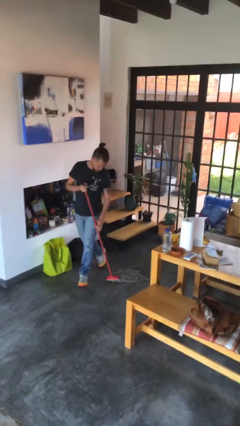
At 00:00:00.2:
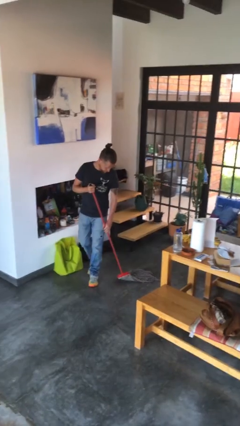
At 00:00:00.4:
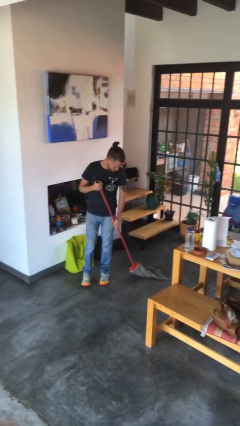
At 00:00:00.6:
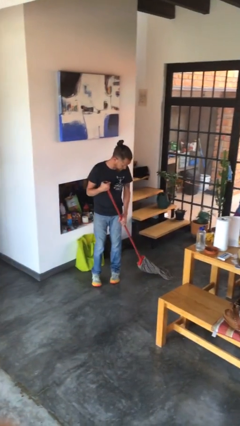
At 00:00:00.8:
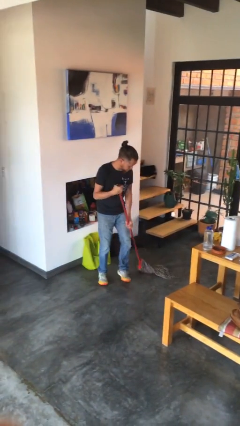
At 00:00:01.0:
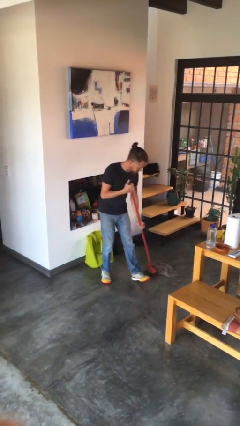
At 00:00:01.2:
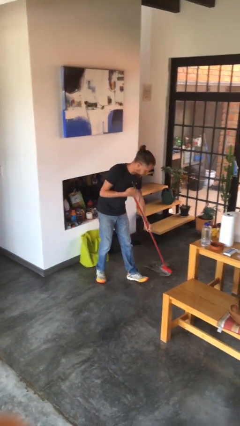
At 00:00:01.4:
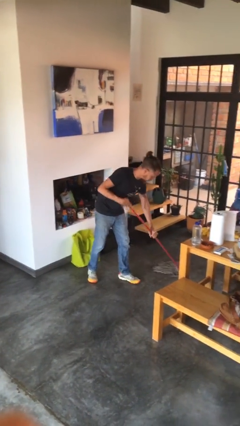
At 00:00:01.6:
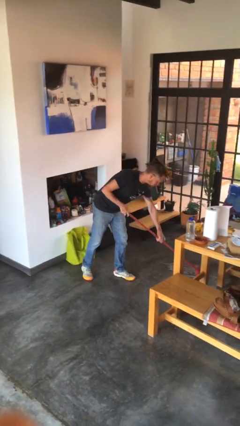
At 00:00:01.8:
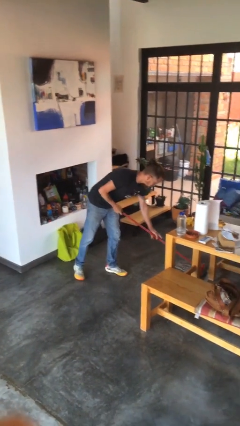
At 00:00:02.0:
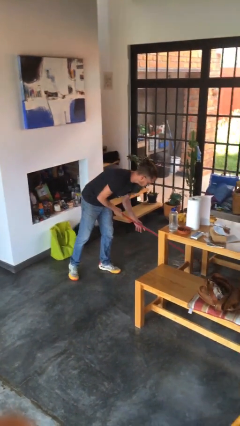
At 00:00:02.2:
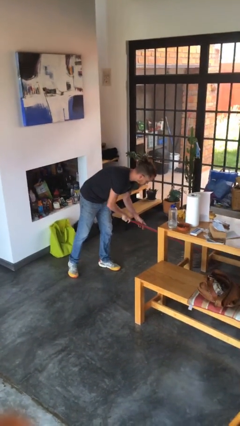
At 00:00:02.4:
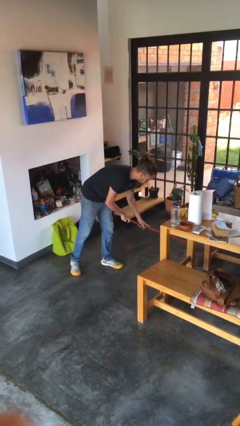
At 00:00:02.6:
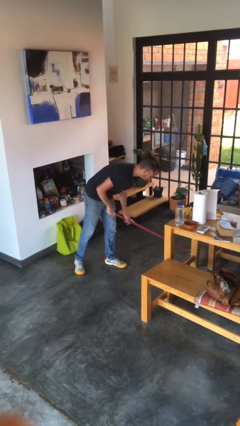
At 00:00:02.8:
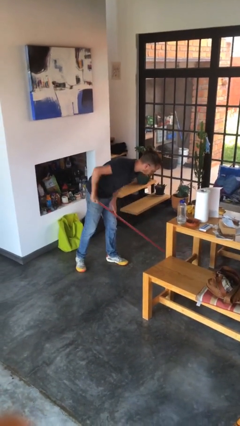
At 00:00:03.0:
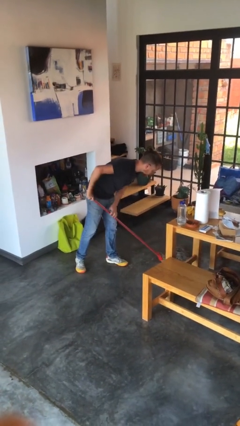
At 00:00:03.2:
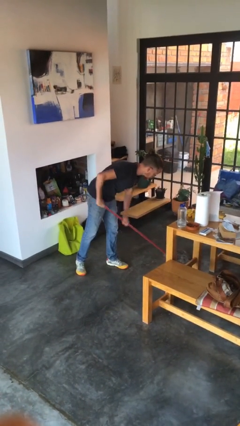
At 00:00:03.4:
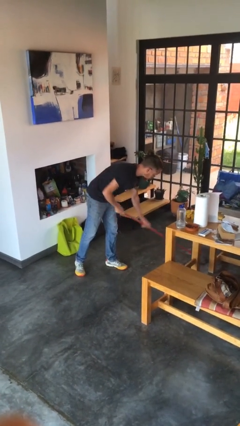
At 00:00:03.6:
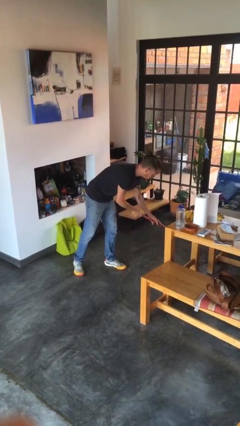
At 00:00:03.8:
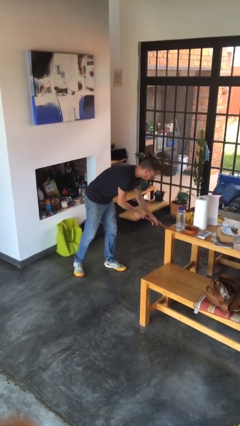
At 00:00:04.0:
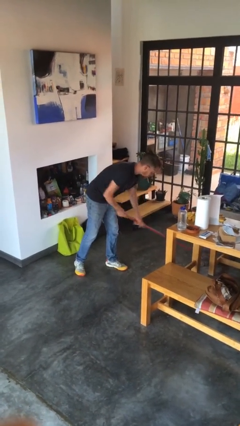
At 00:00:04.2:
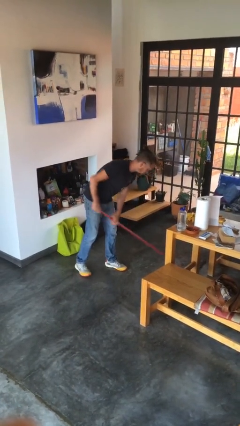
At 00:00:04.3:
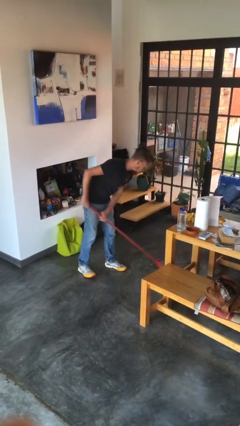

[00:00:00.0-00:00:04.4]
person mops

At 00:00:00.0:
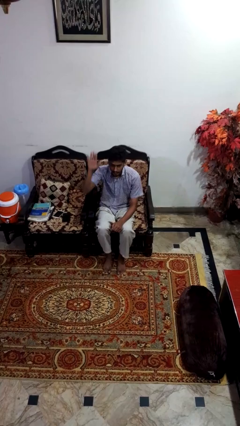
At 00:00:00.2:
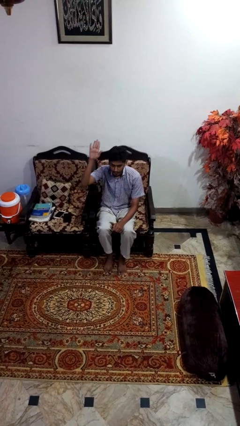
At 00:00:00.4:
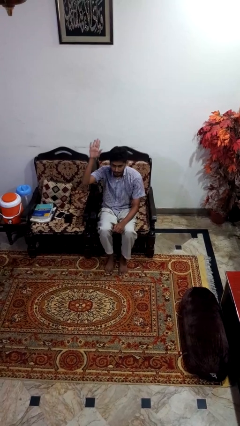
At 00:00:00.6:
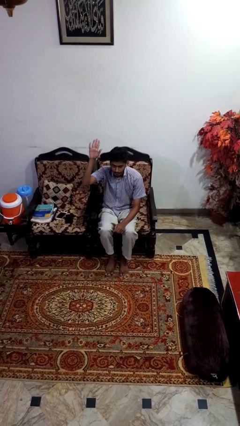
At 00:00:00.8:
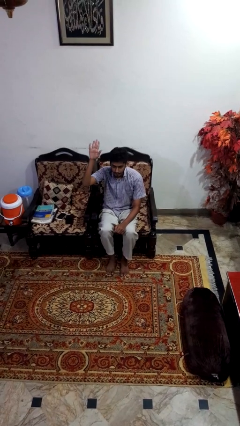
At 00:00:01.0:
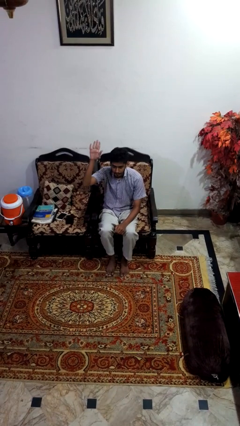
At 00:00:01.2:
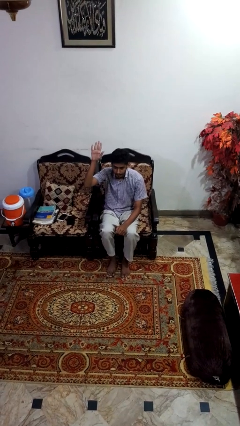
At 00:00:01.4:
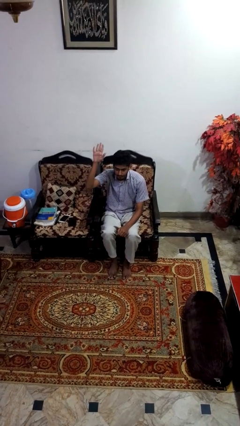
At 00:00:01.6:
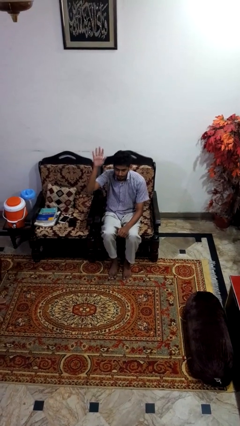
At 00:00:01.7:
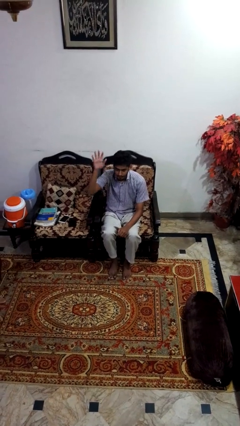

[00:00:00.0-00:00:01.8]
person gestures raise hand

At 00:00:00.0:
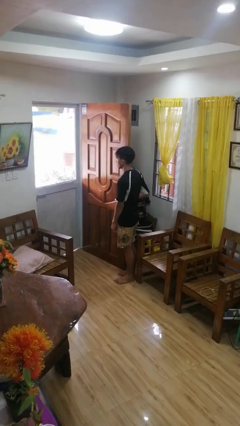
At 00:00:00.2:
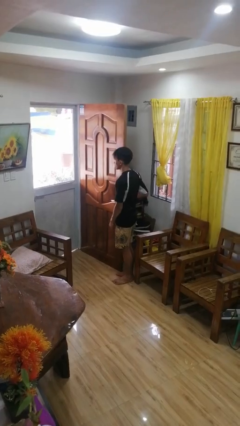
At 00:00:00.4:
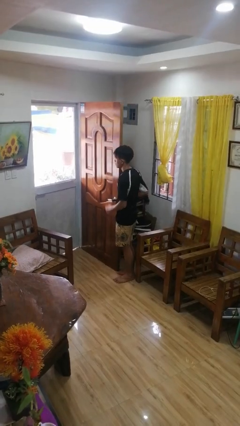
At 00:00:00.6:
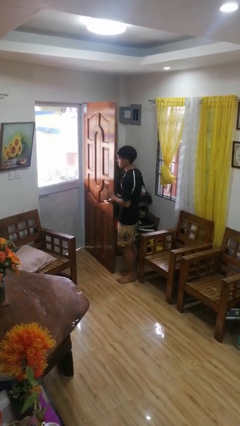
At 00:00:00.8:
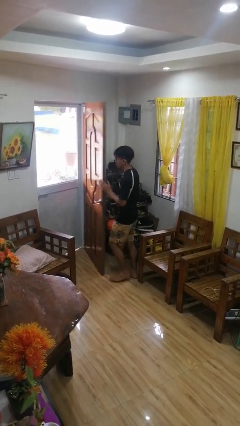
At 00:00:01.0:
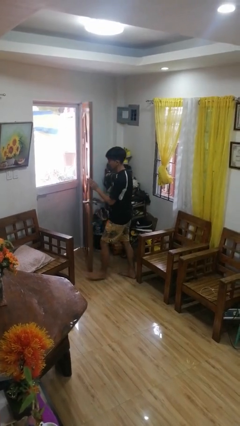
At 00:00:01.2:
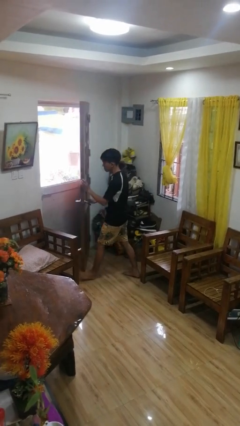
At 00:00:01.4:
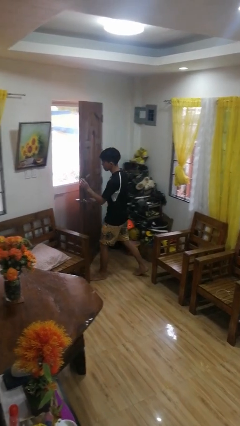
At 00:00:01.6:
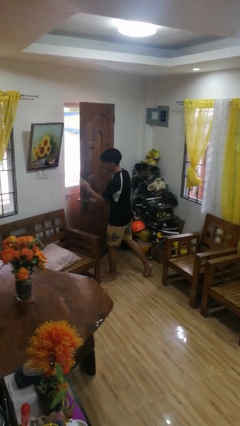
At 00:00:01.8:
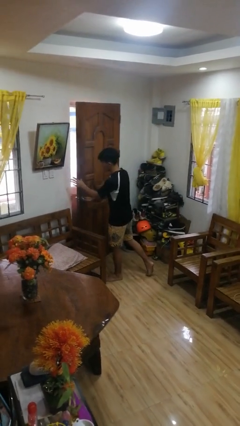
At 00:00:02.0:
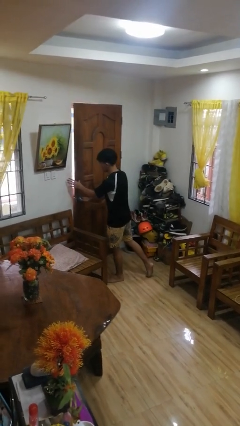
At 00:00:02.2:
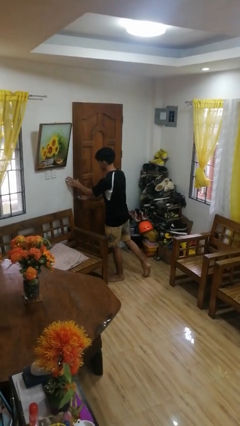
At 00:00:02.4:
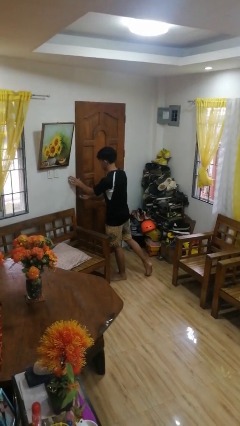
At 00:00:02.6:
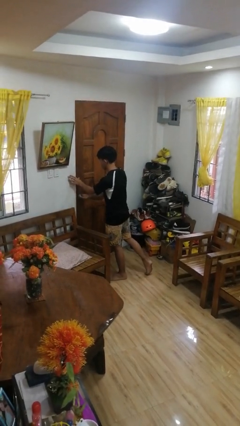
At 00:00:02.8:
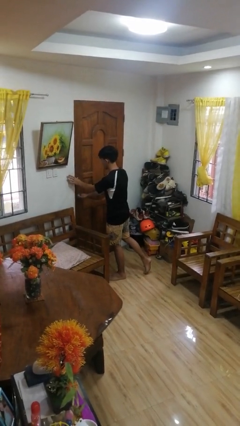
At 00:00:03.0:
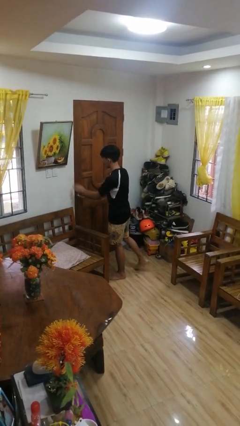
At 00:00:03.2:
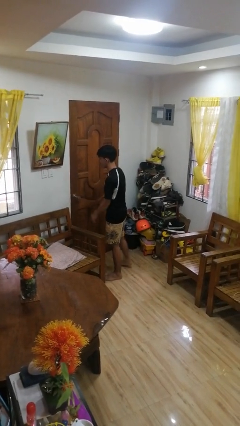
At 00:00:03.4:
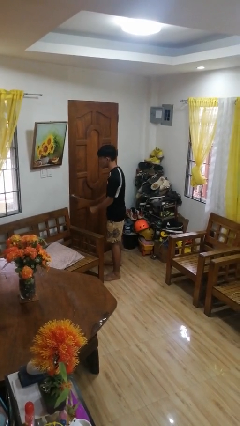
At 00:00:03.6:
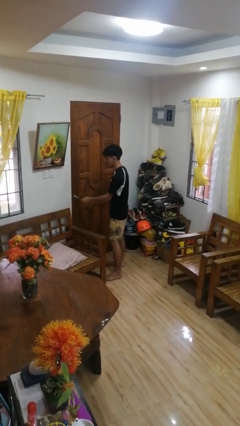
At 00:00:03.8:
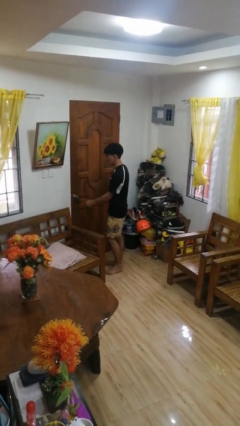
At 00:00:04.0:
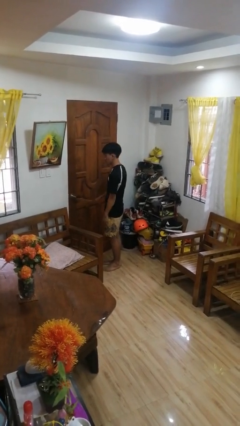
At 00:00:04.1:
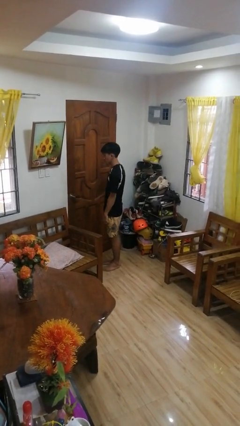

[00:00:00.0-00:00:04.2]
person closes facility door

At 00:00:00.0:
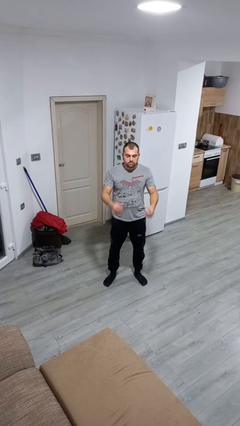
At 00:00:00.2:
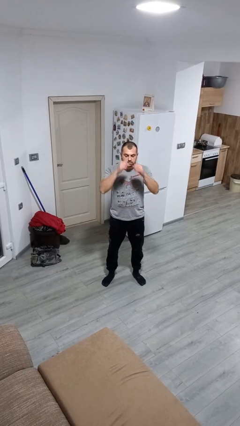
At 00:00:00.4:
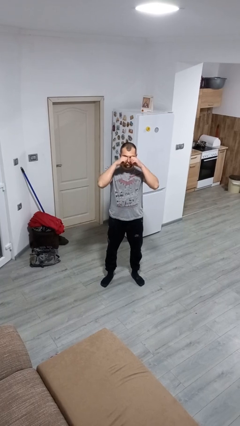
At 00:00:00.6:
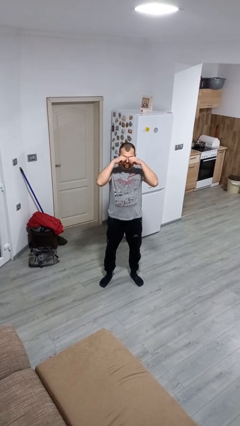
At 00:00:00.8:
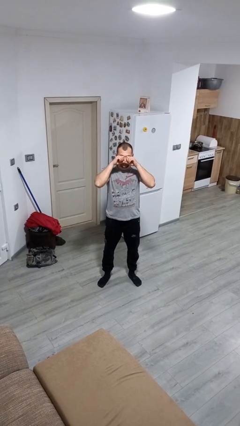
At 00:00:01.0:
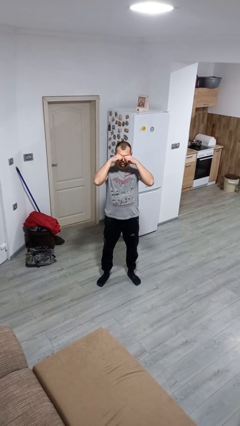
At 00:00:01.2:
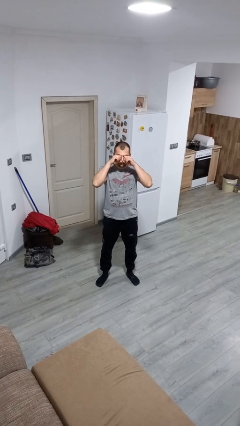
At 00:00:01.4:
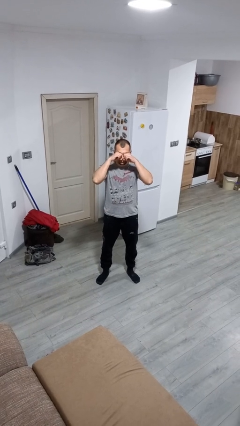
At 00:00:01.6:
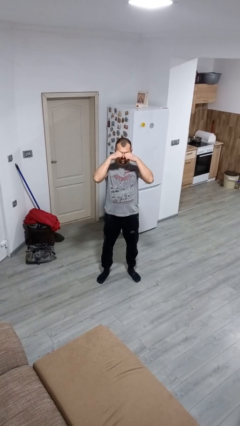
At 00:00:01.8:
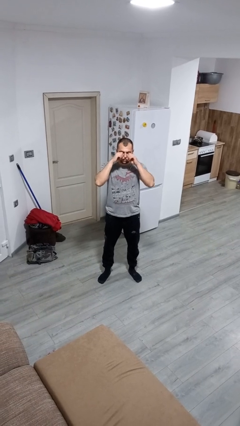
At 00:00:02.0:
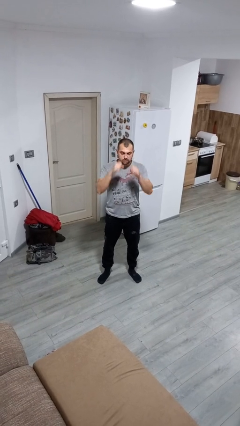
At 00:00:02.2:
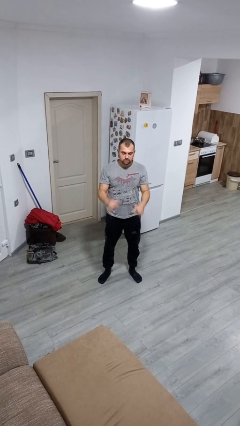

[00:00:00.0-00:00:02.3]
person rubs eyes

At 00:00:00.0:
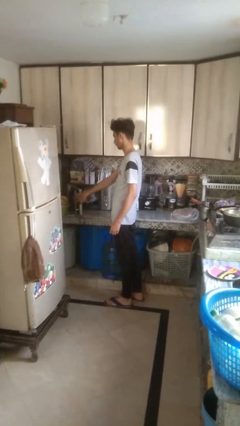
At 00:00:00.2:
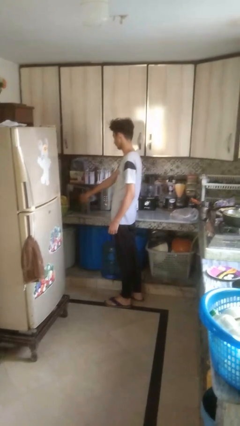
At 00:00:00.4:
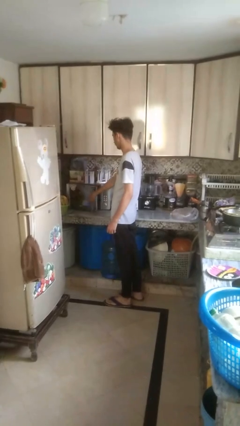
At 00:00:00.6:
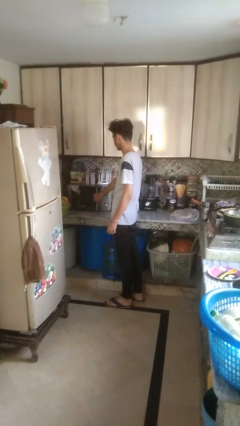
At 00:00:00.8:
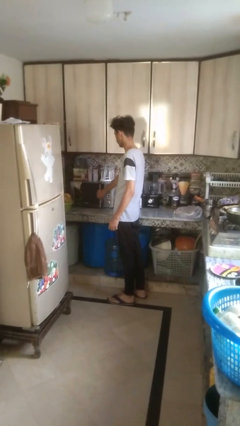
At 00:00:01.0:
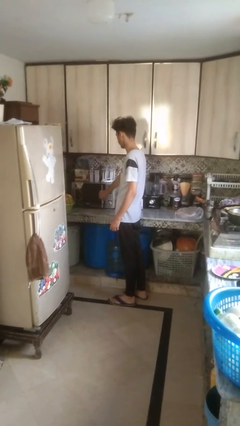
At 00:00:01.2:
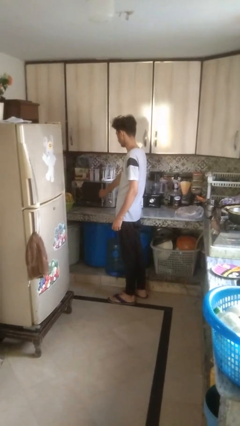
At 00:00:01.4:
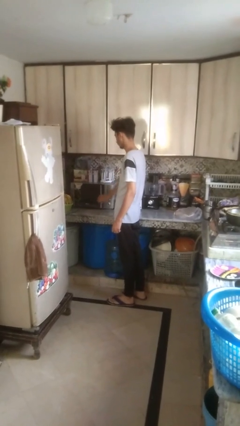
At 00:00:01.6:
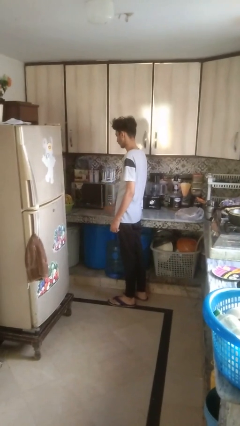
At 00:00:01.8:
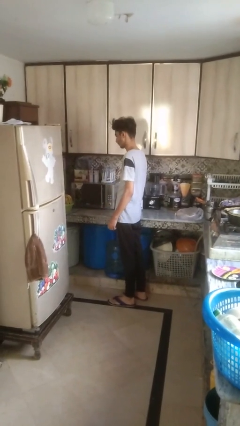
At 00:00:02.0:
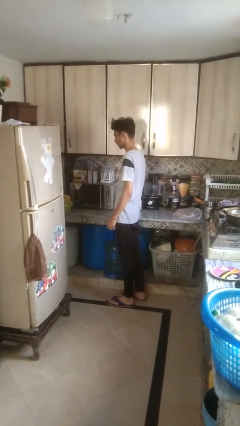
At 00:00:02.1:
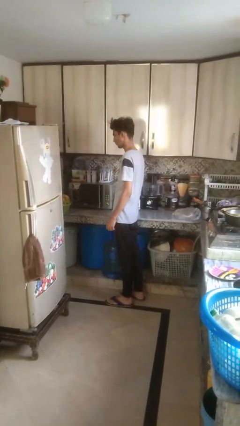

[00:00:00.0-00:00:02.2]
person closes oven door

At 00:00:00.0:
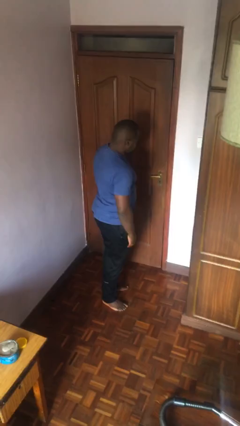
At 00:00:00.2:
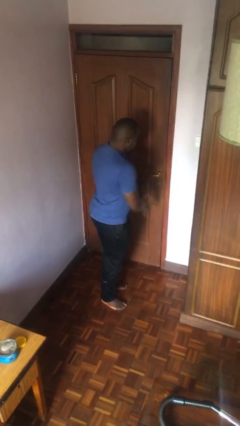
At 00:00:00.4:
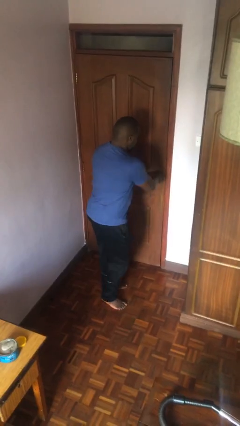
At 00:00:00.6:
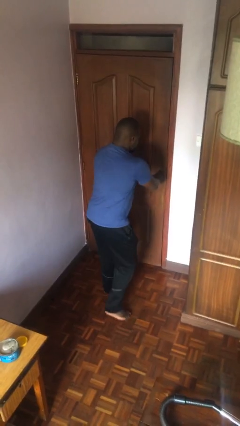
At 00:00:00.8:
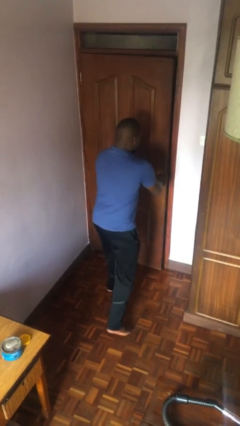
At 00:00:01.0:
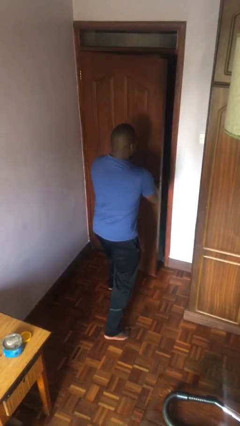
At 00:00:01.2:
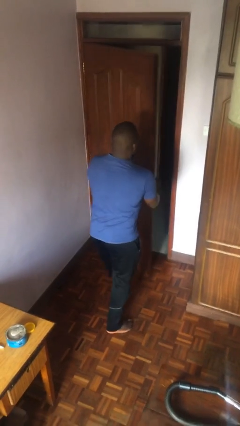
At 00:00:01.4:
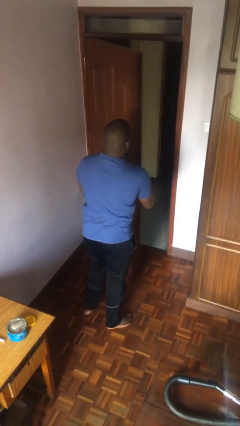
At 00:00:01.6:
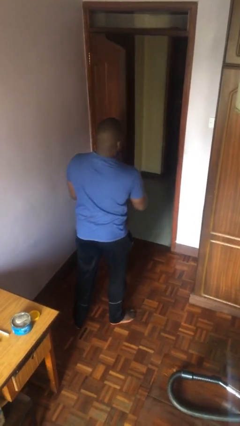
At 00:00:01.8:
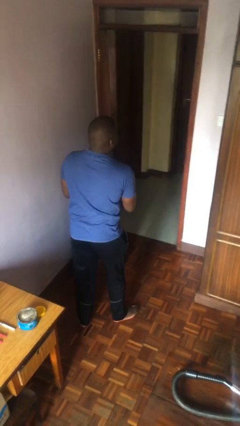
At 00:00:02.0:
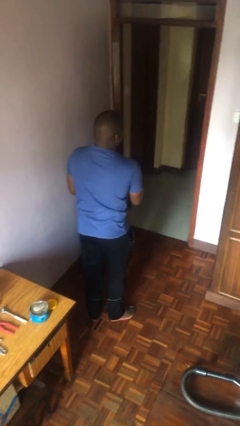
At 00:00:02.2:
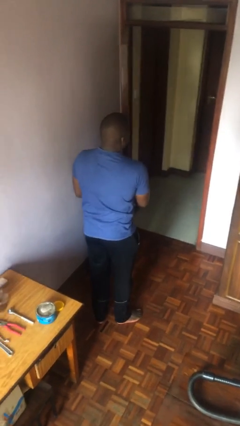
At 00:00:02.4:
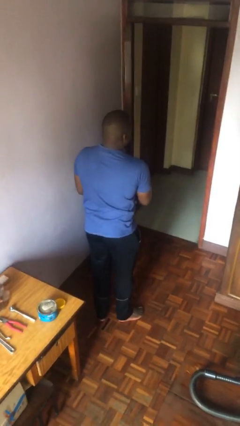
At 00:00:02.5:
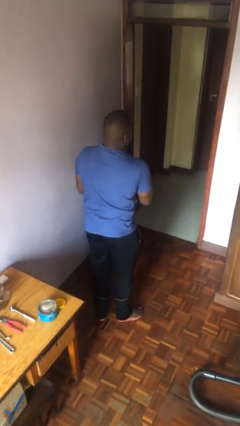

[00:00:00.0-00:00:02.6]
person opens facility door
